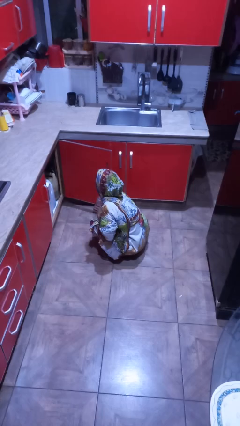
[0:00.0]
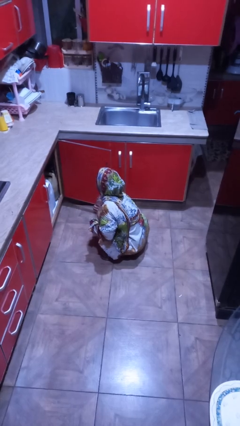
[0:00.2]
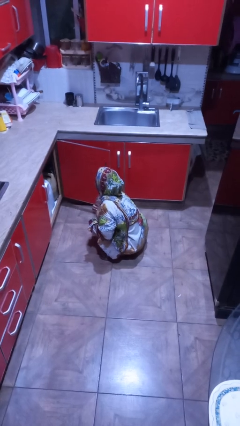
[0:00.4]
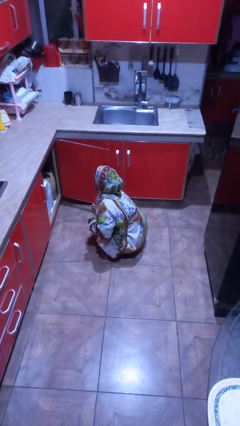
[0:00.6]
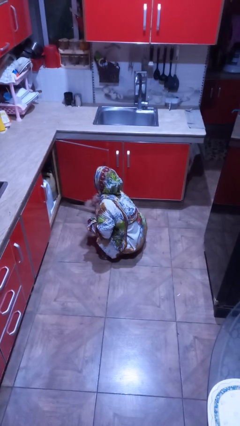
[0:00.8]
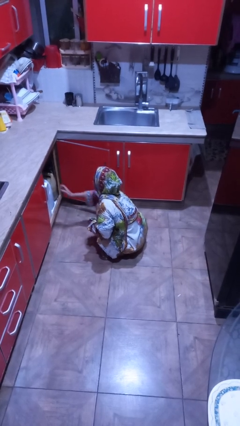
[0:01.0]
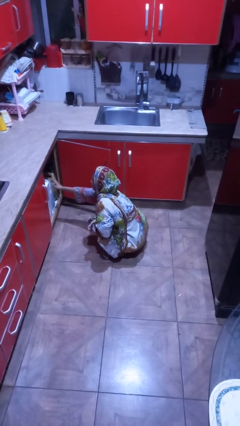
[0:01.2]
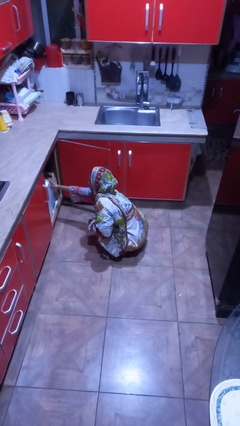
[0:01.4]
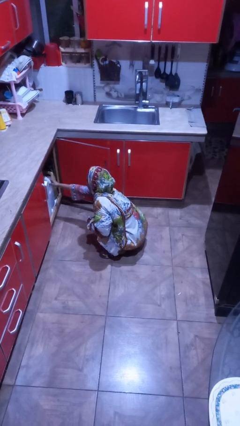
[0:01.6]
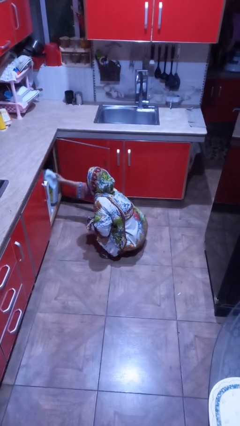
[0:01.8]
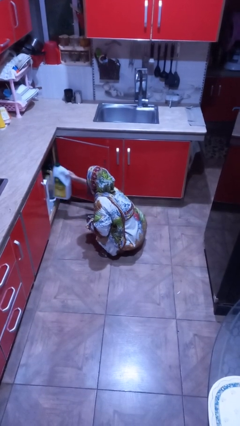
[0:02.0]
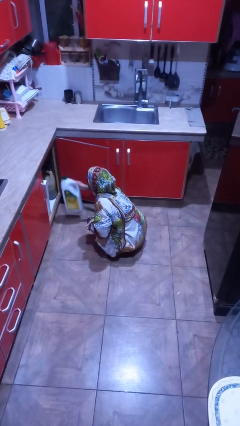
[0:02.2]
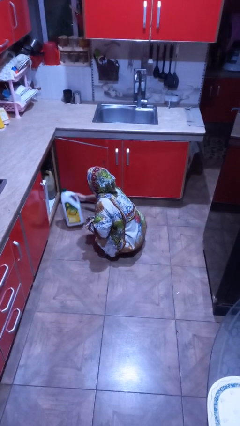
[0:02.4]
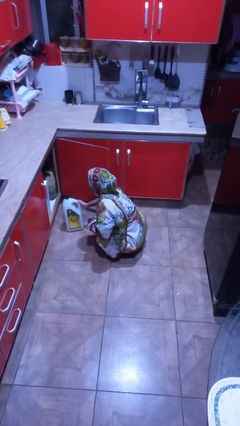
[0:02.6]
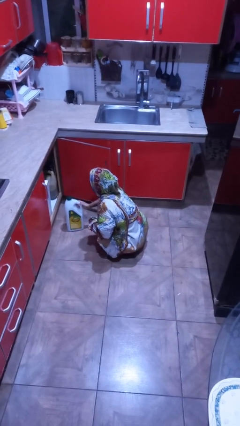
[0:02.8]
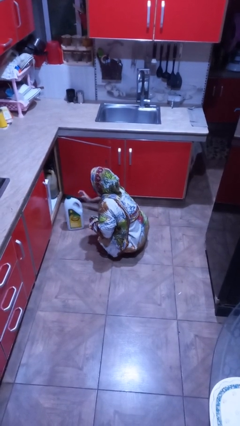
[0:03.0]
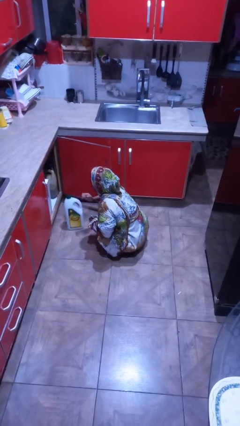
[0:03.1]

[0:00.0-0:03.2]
person takes object from cabinet

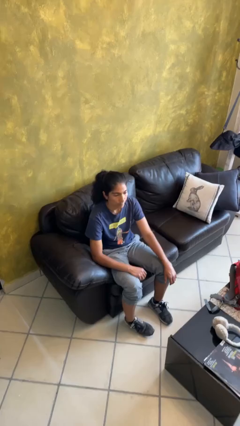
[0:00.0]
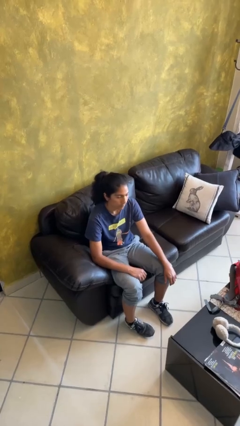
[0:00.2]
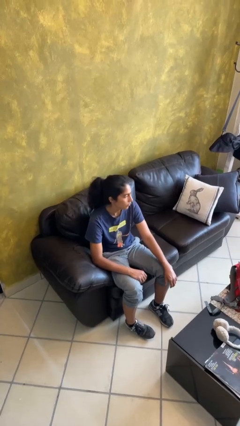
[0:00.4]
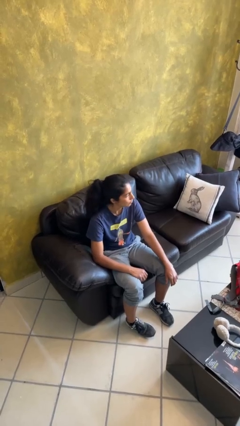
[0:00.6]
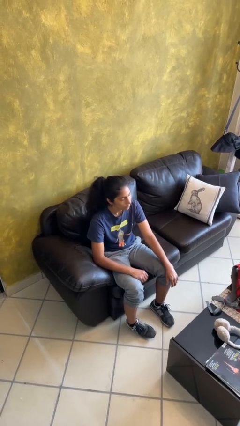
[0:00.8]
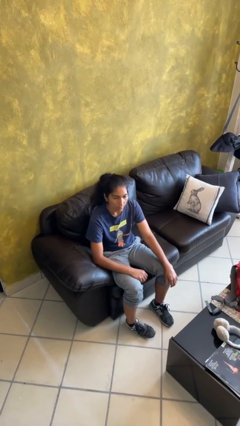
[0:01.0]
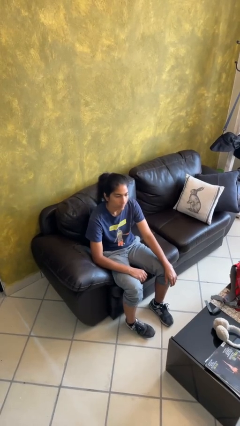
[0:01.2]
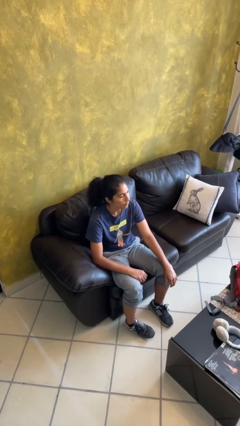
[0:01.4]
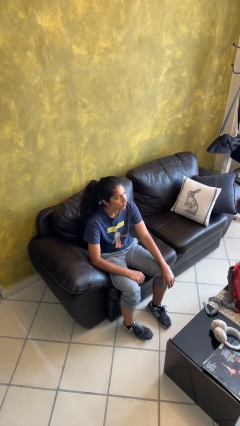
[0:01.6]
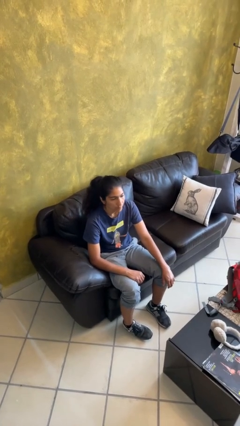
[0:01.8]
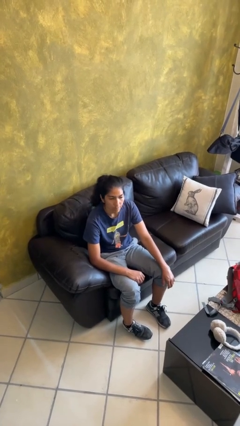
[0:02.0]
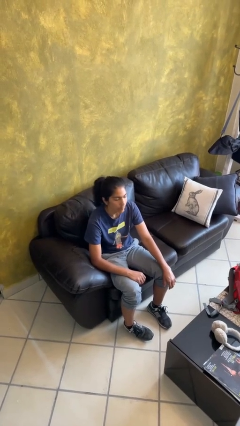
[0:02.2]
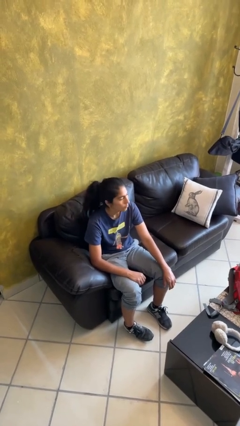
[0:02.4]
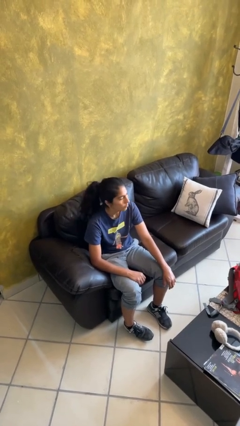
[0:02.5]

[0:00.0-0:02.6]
person shakes head

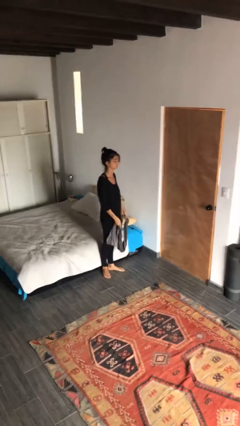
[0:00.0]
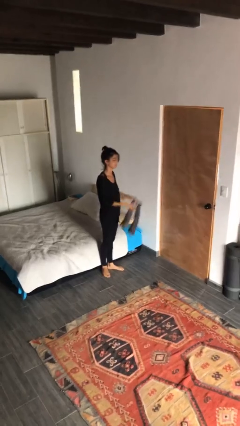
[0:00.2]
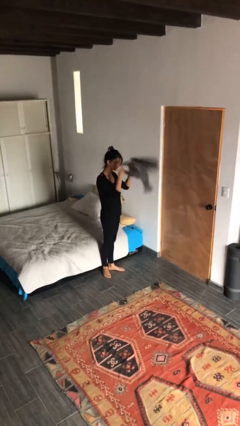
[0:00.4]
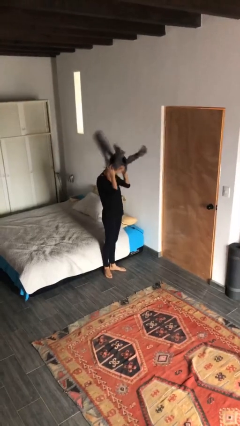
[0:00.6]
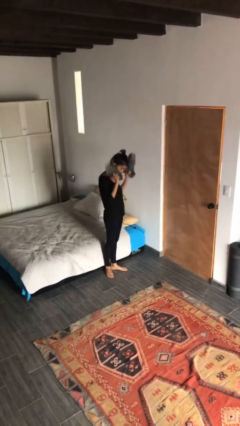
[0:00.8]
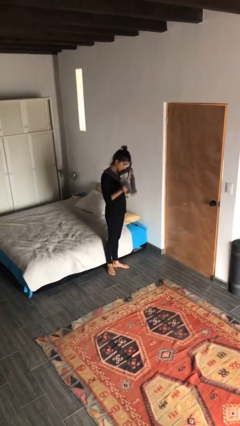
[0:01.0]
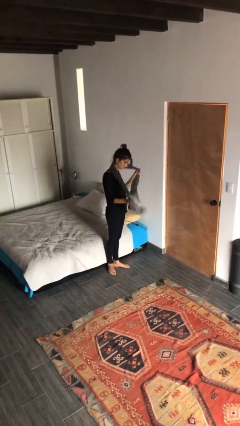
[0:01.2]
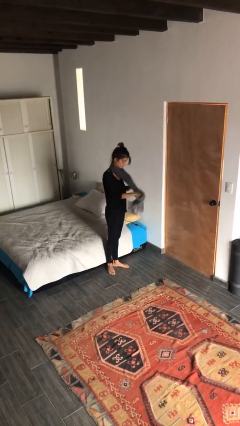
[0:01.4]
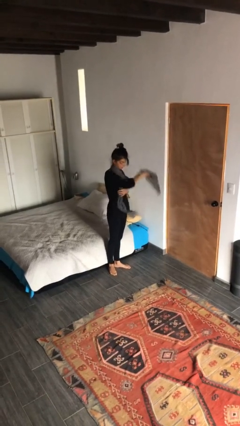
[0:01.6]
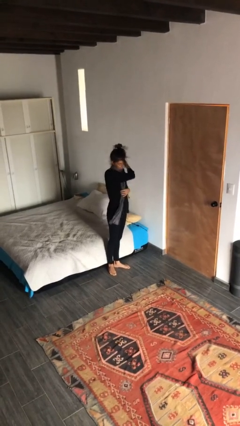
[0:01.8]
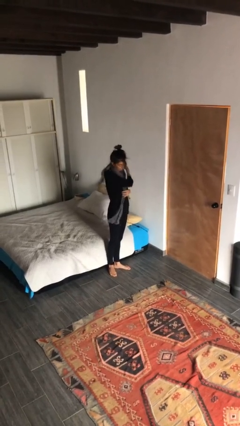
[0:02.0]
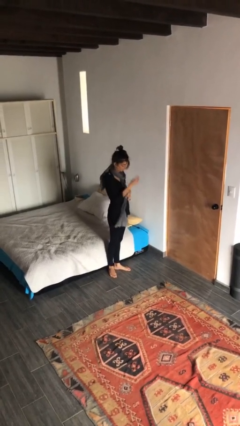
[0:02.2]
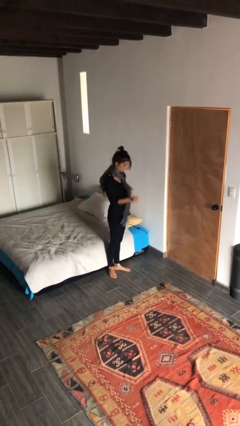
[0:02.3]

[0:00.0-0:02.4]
person puts on scarf

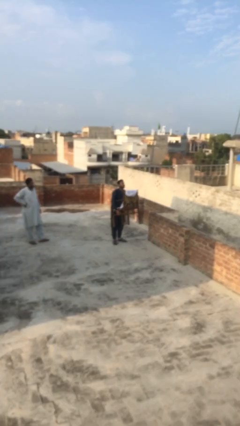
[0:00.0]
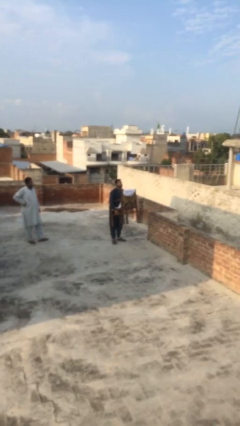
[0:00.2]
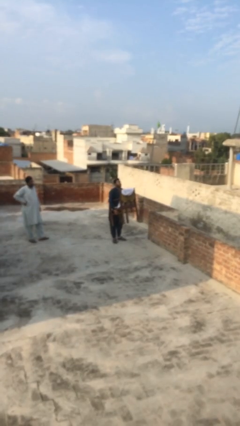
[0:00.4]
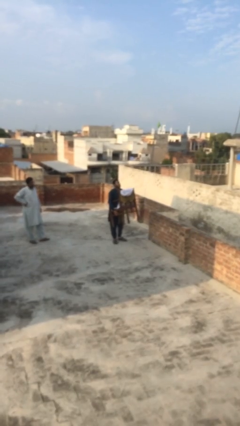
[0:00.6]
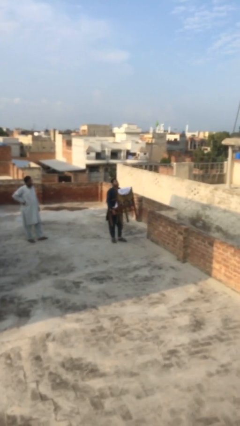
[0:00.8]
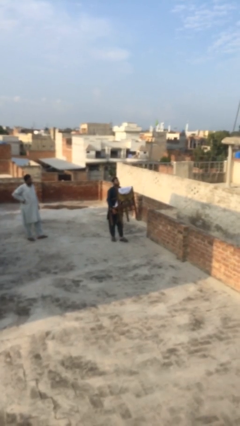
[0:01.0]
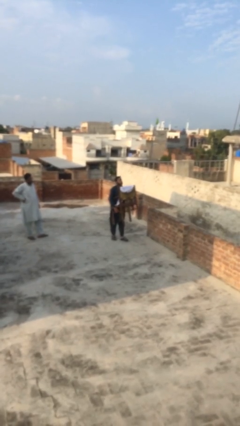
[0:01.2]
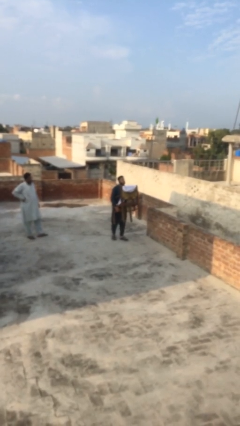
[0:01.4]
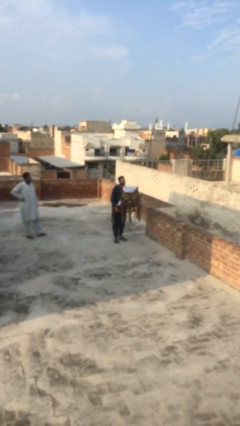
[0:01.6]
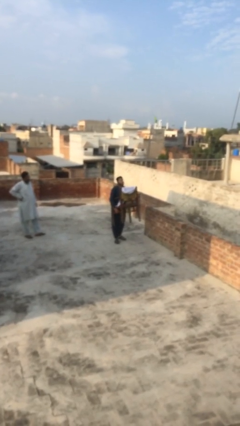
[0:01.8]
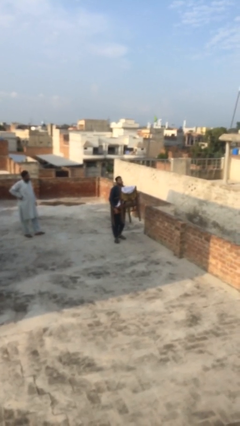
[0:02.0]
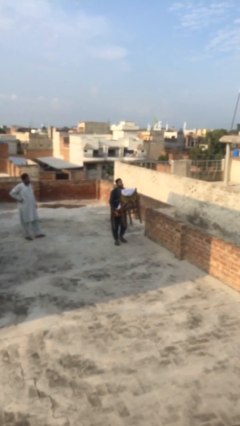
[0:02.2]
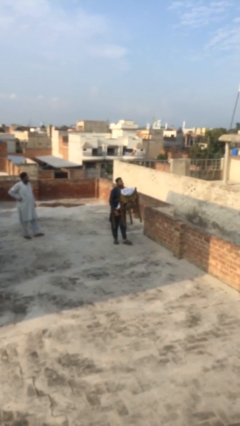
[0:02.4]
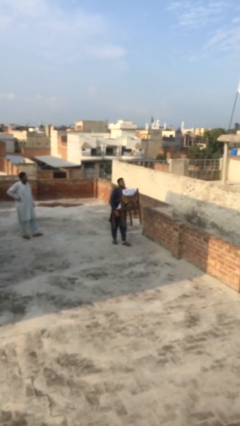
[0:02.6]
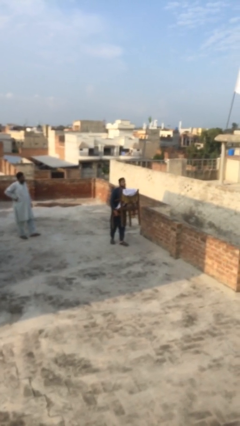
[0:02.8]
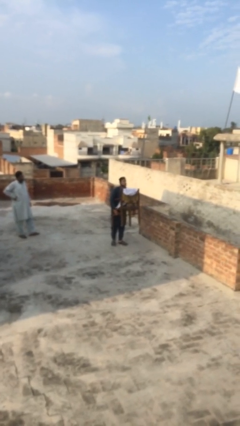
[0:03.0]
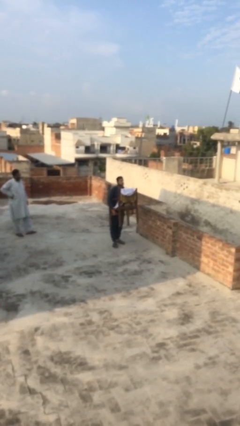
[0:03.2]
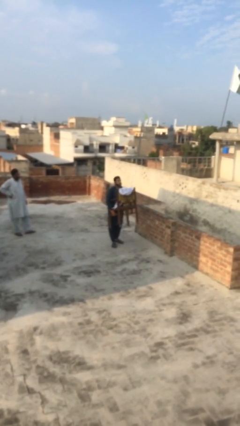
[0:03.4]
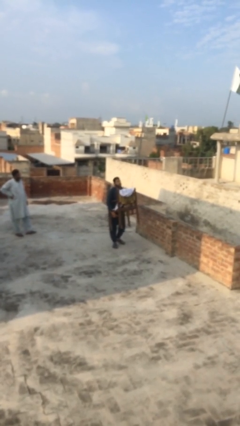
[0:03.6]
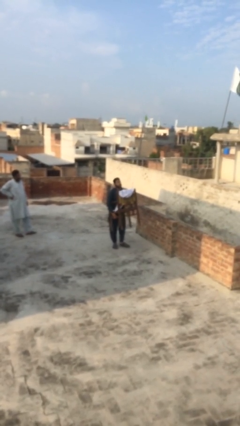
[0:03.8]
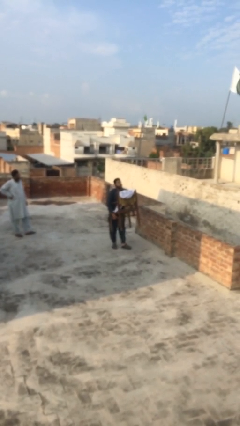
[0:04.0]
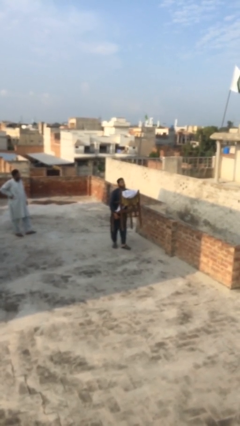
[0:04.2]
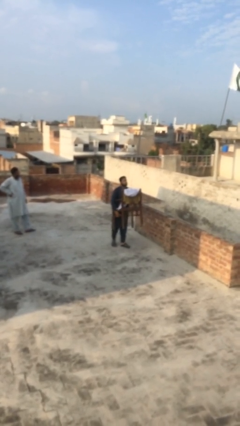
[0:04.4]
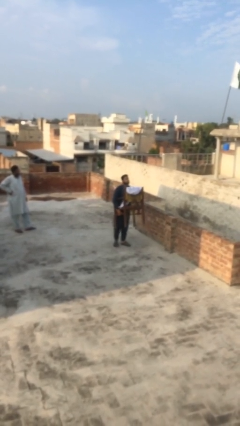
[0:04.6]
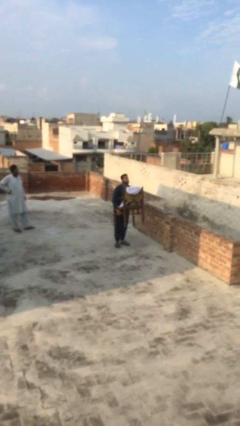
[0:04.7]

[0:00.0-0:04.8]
person carries heavy object

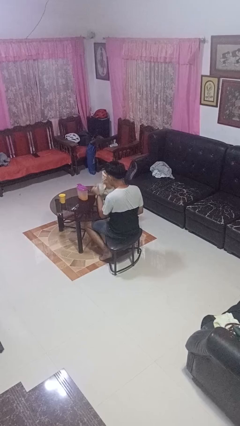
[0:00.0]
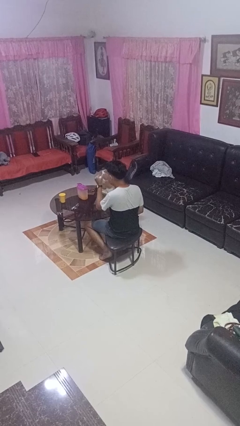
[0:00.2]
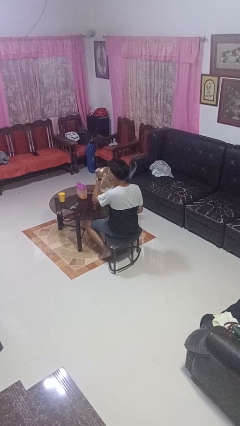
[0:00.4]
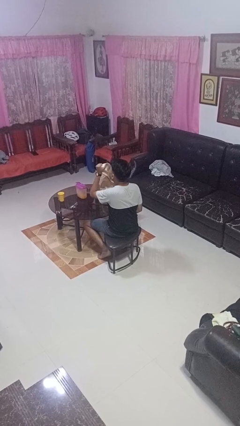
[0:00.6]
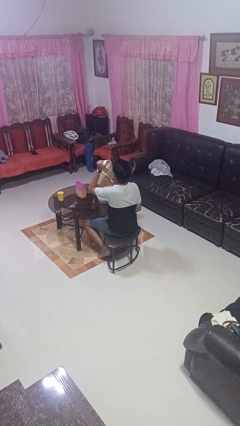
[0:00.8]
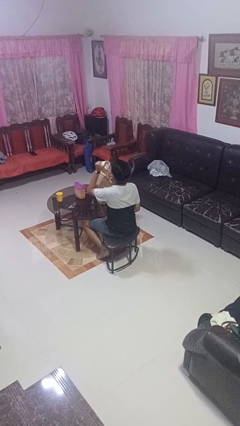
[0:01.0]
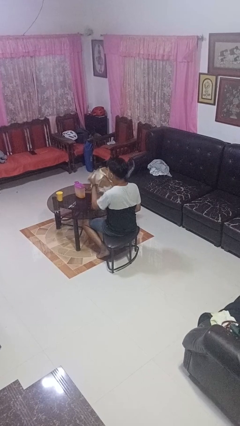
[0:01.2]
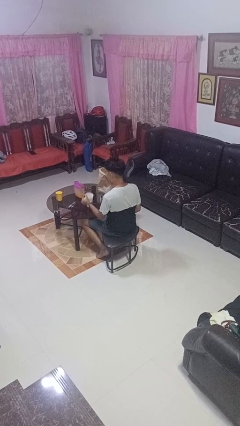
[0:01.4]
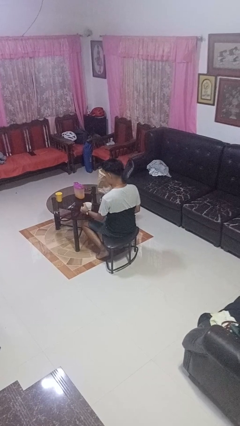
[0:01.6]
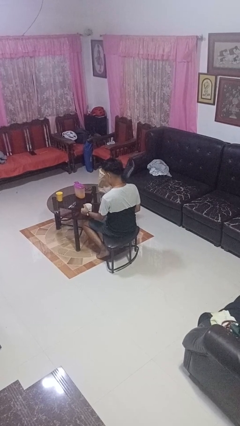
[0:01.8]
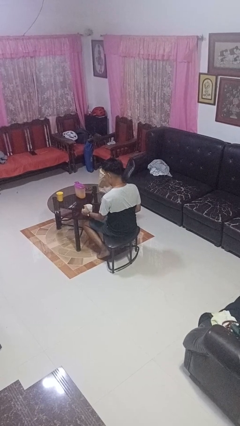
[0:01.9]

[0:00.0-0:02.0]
person drinks from mug

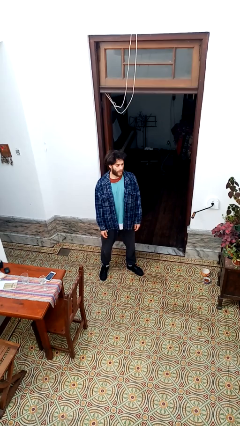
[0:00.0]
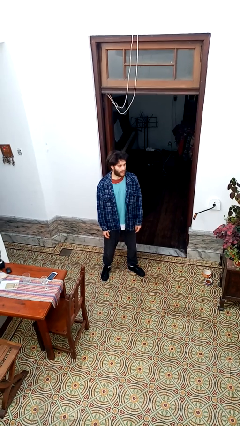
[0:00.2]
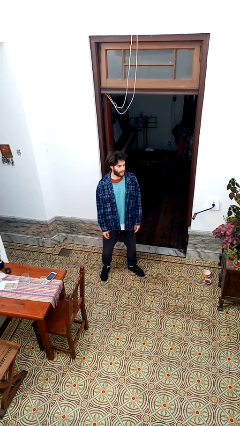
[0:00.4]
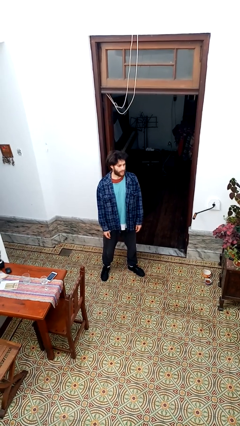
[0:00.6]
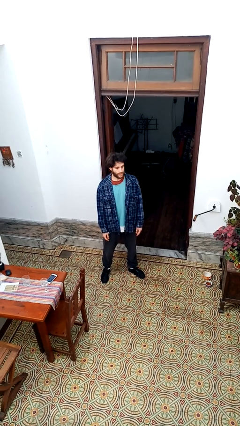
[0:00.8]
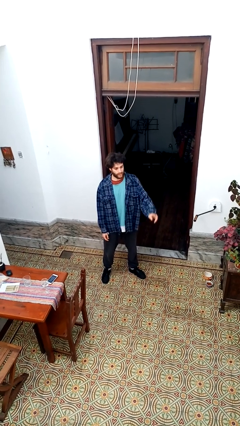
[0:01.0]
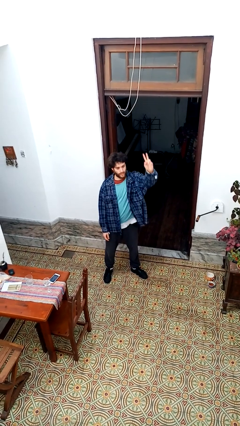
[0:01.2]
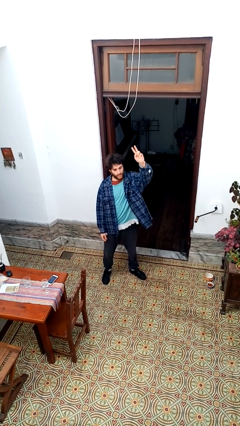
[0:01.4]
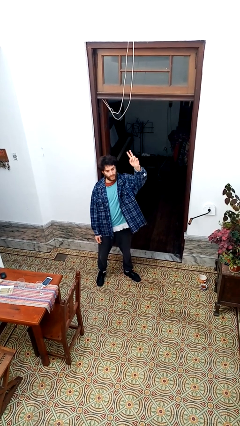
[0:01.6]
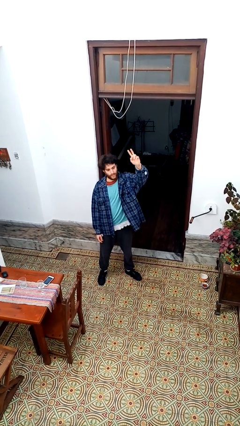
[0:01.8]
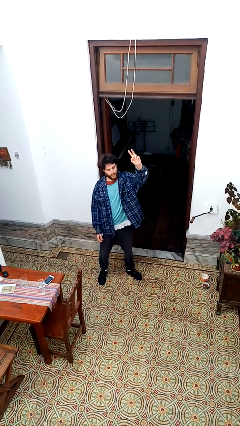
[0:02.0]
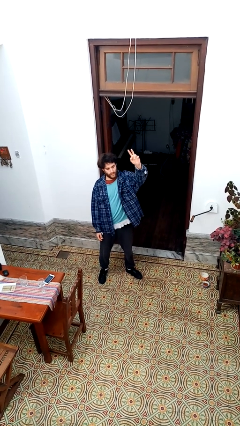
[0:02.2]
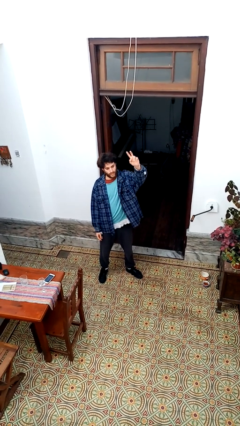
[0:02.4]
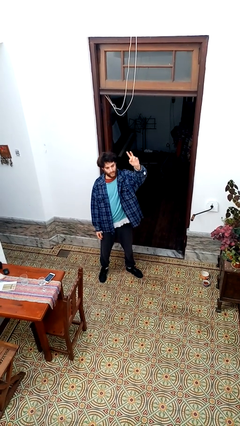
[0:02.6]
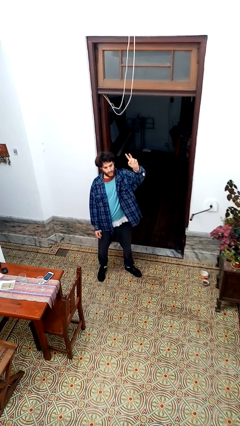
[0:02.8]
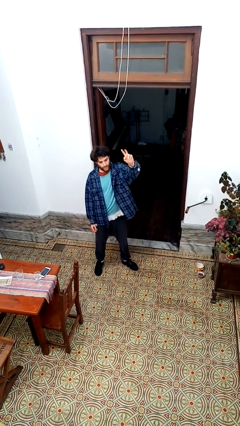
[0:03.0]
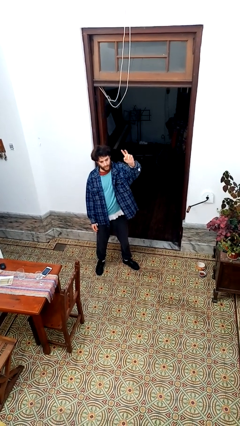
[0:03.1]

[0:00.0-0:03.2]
person gestures raise hand
